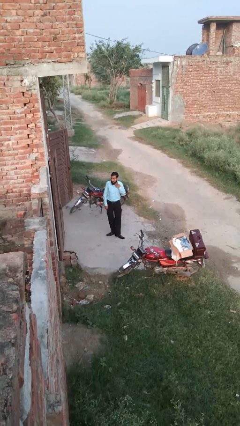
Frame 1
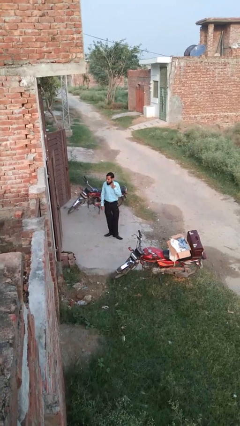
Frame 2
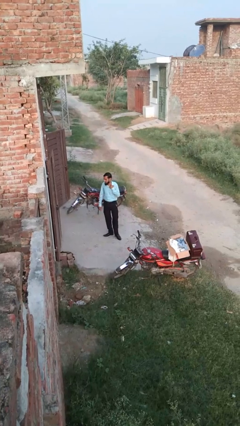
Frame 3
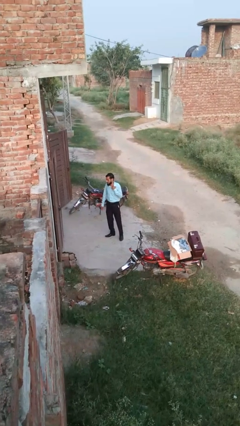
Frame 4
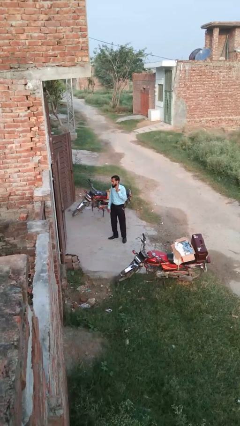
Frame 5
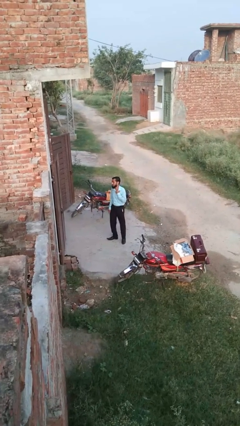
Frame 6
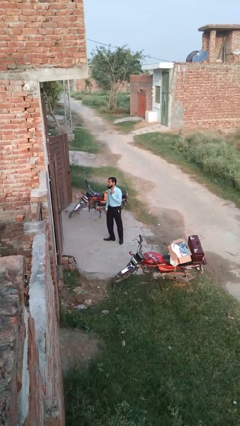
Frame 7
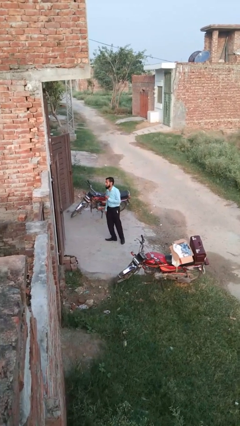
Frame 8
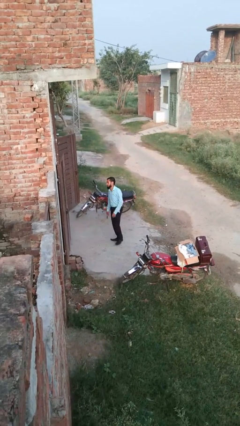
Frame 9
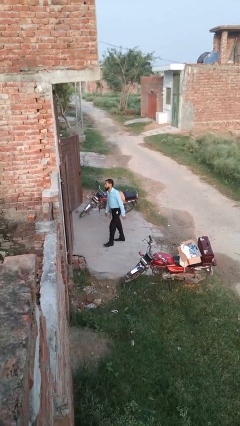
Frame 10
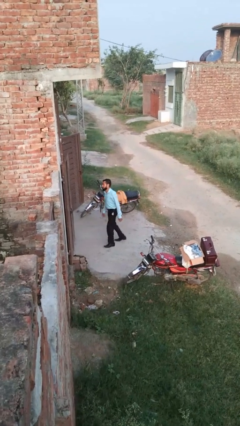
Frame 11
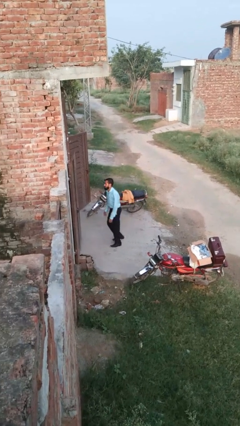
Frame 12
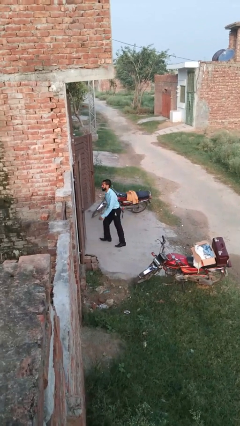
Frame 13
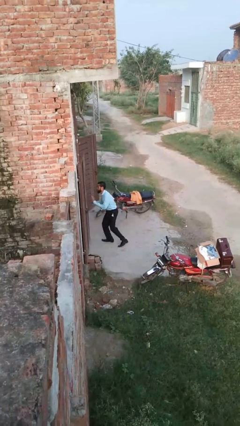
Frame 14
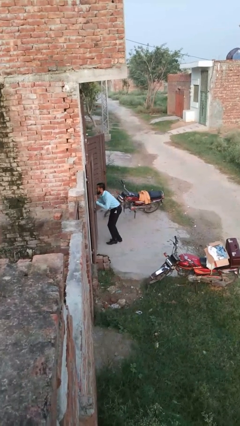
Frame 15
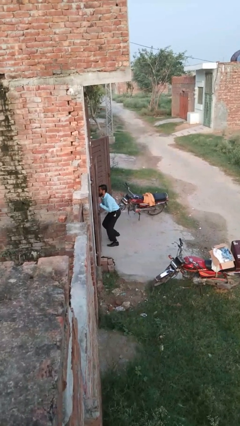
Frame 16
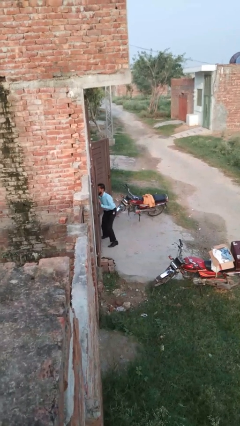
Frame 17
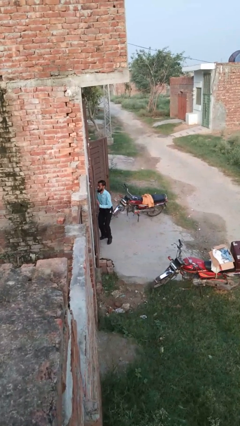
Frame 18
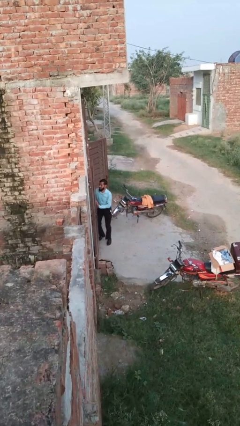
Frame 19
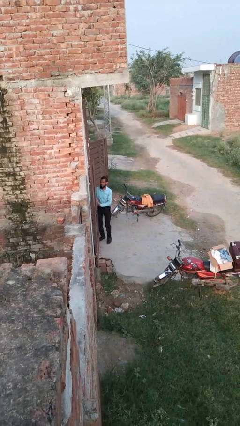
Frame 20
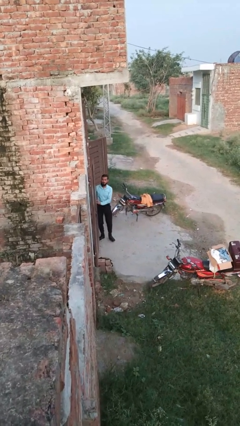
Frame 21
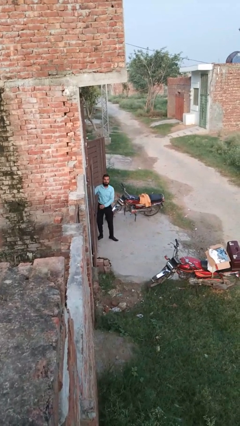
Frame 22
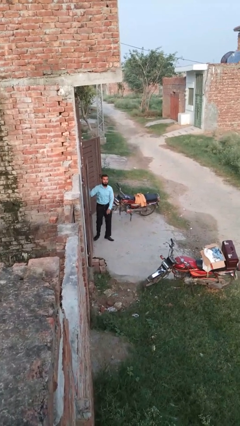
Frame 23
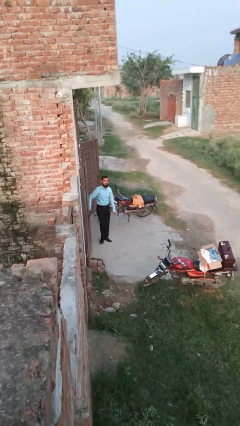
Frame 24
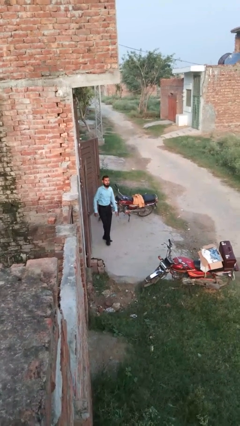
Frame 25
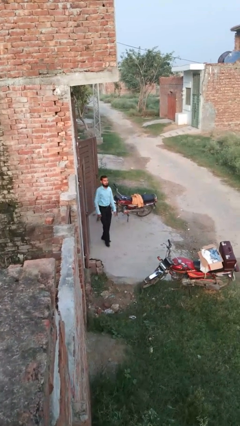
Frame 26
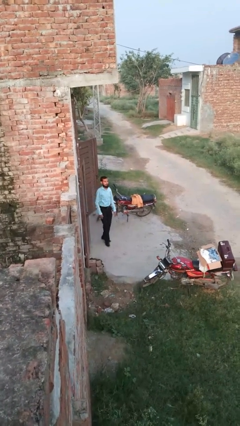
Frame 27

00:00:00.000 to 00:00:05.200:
person bumps into wall

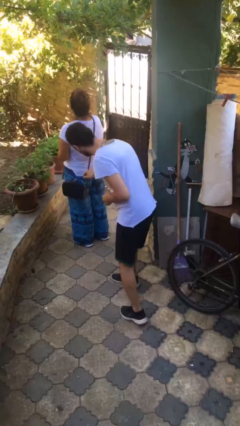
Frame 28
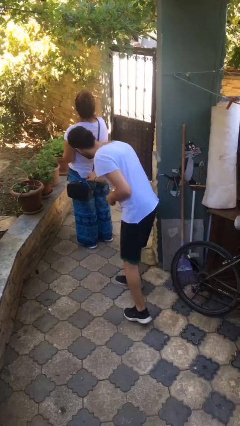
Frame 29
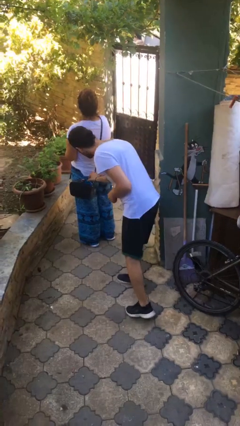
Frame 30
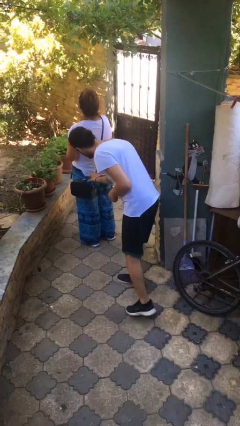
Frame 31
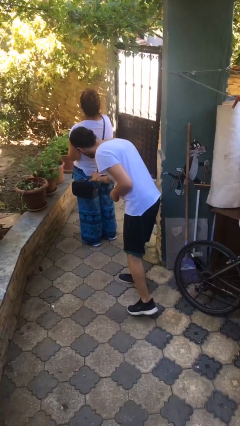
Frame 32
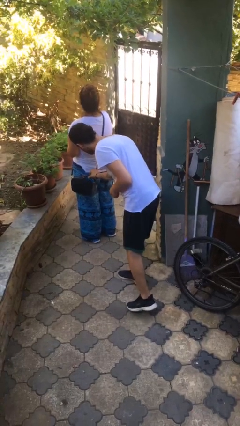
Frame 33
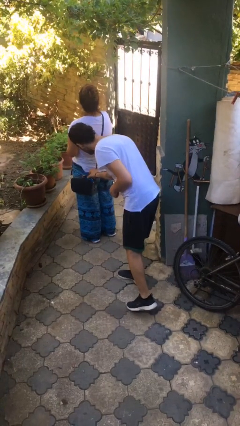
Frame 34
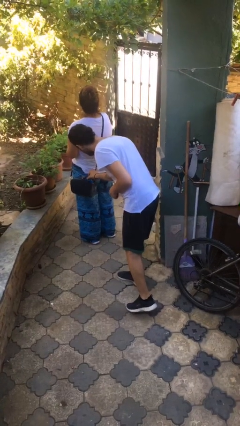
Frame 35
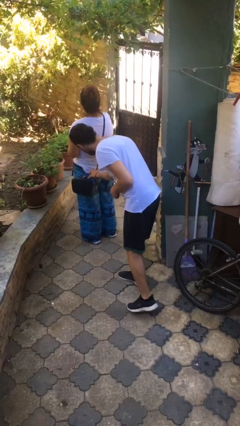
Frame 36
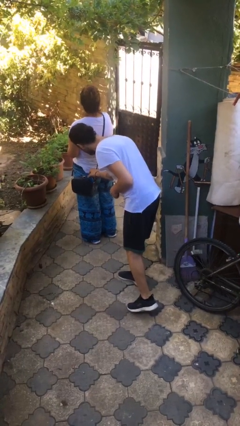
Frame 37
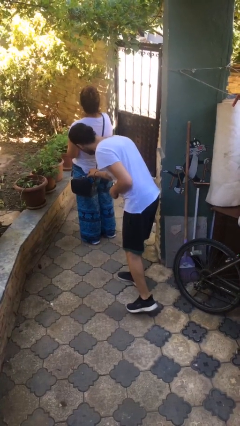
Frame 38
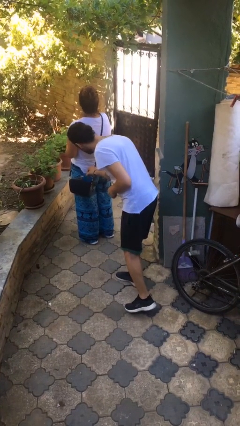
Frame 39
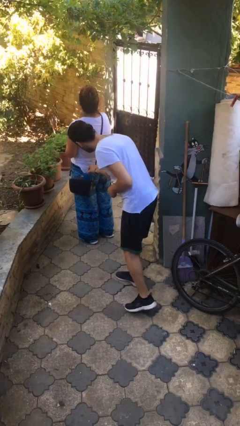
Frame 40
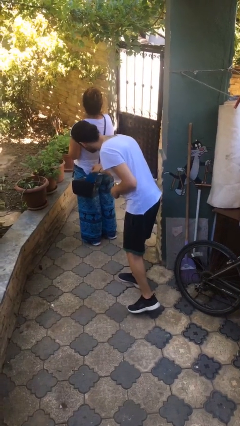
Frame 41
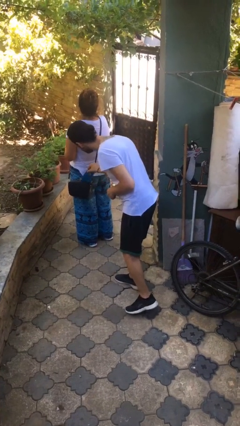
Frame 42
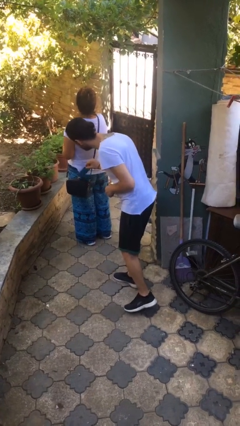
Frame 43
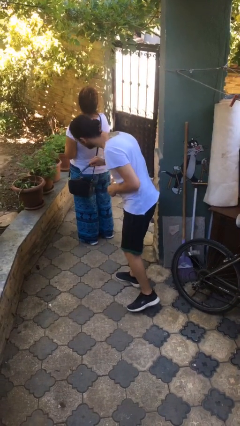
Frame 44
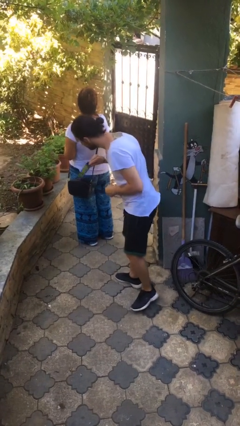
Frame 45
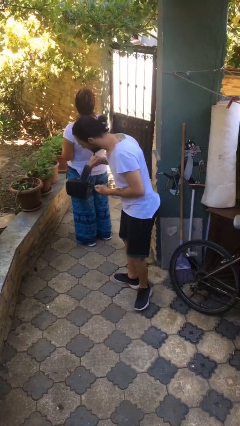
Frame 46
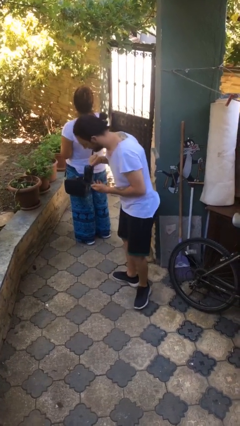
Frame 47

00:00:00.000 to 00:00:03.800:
person steals object from person

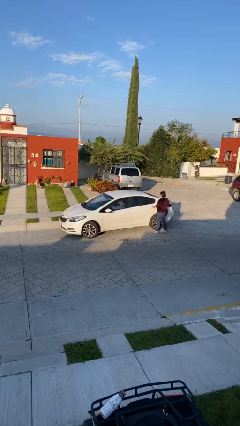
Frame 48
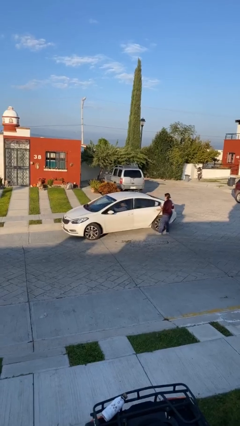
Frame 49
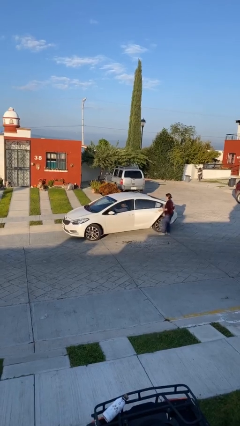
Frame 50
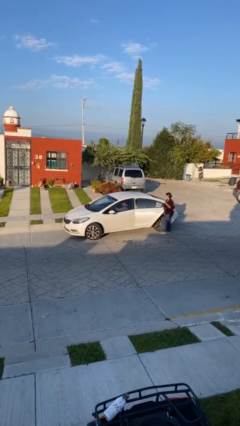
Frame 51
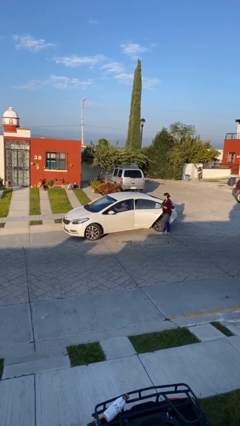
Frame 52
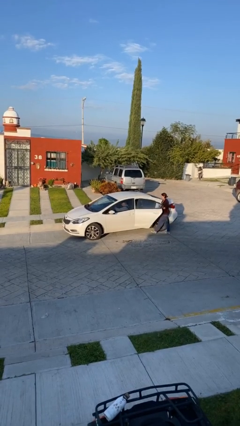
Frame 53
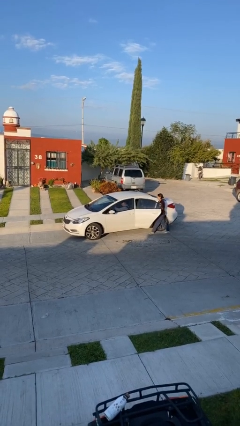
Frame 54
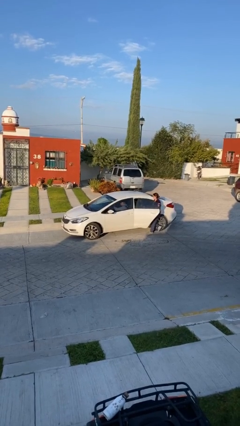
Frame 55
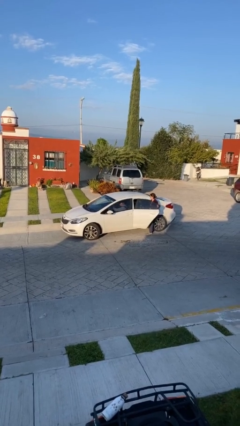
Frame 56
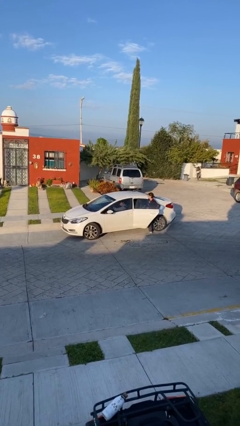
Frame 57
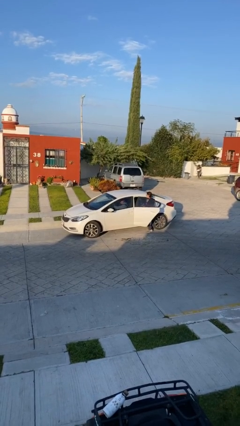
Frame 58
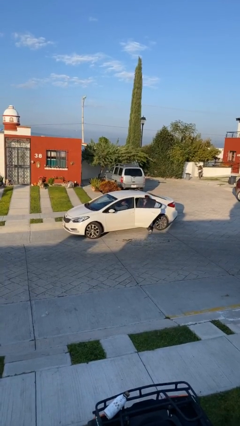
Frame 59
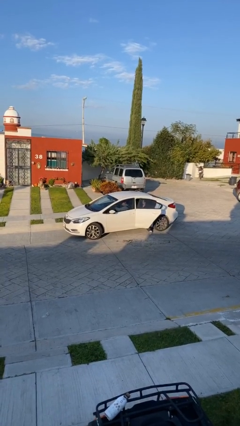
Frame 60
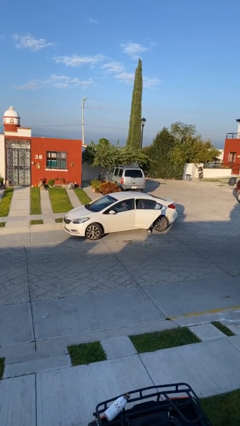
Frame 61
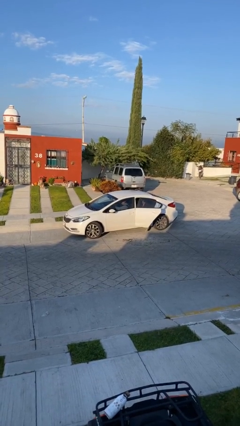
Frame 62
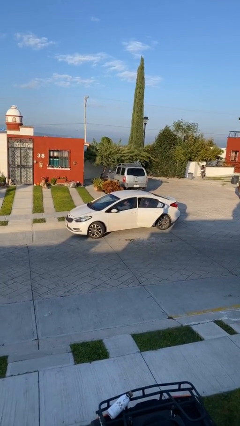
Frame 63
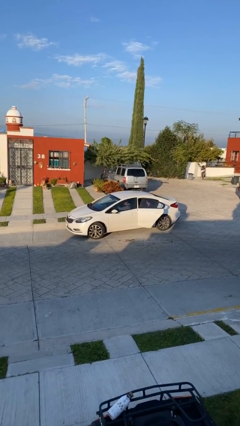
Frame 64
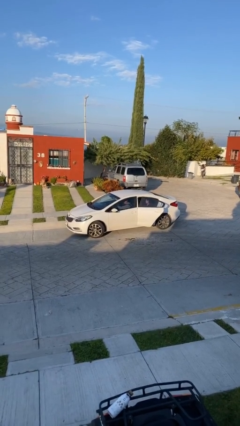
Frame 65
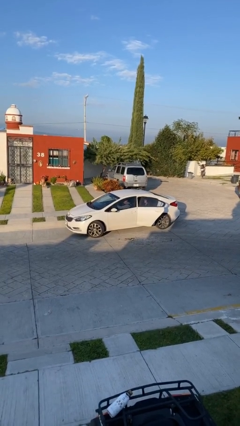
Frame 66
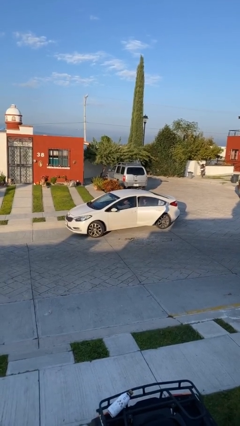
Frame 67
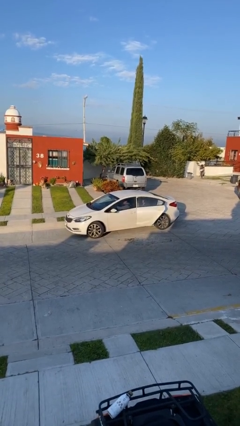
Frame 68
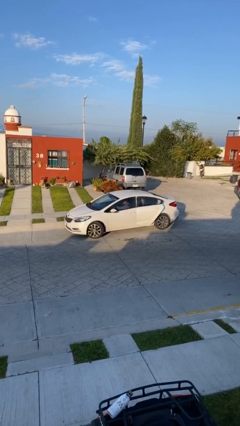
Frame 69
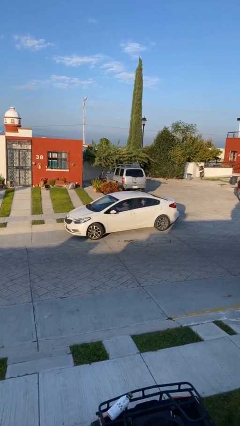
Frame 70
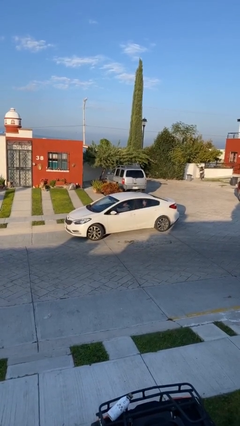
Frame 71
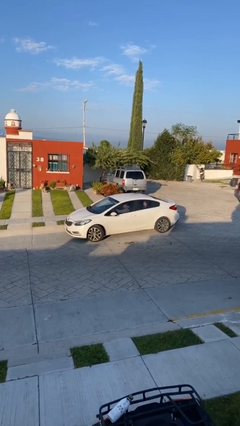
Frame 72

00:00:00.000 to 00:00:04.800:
car picks up person

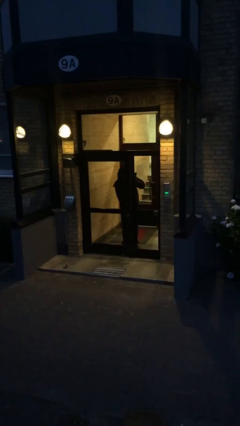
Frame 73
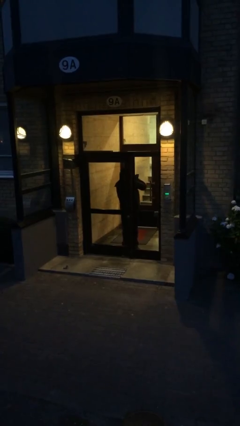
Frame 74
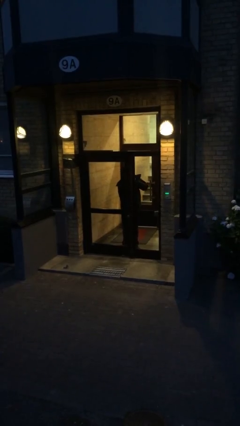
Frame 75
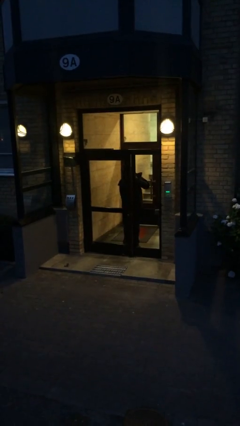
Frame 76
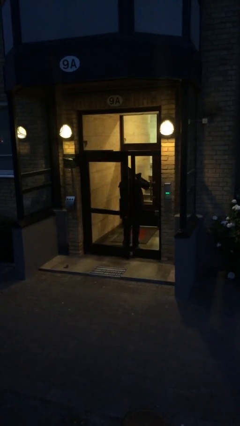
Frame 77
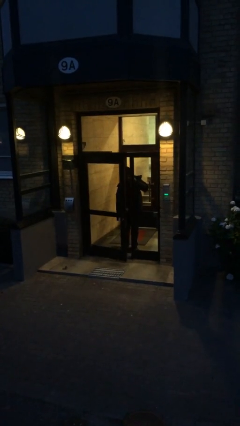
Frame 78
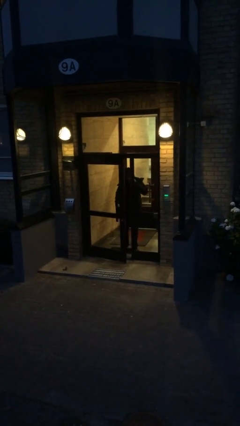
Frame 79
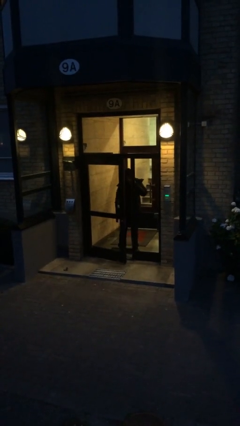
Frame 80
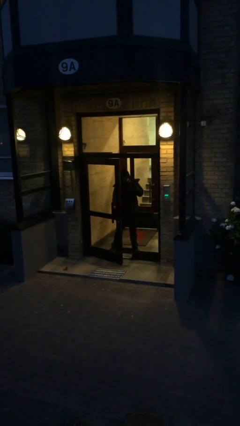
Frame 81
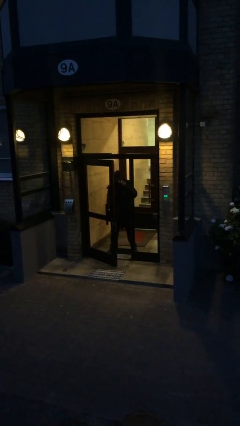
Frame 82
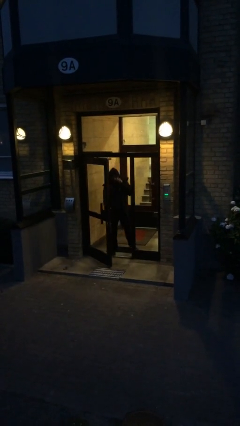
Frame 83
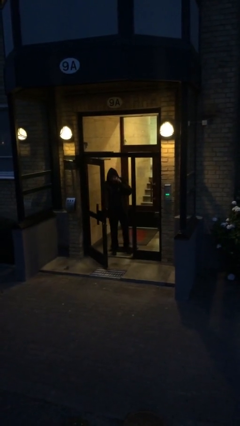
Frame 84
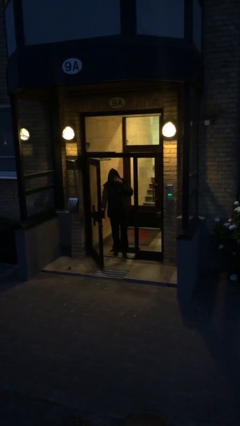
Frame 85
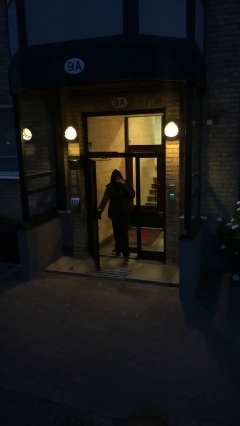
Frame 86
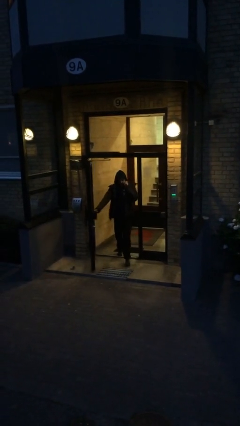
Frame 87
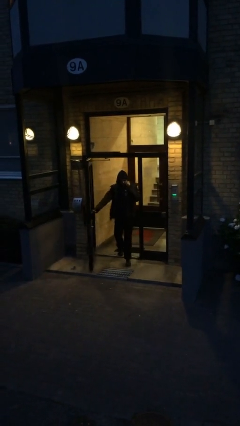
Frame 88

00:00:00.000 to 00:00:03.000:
person opens facility door

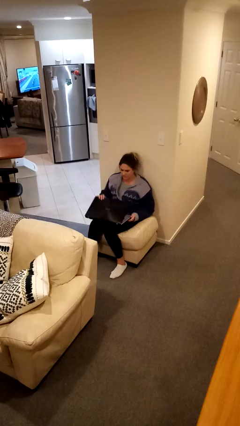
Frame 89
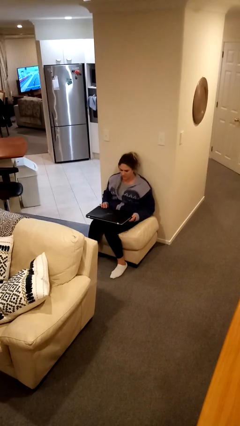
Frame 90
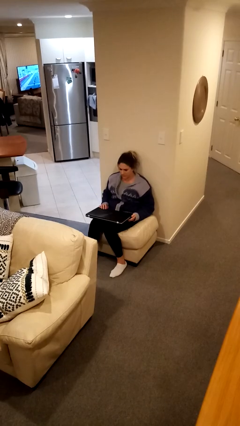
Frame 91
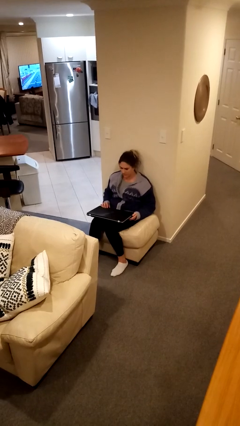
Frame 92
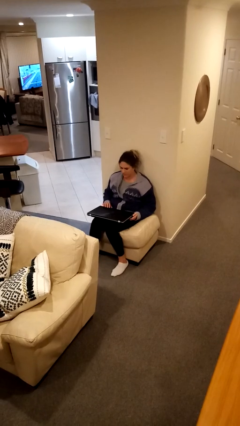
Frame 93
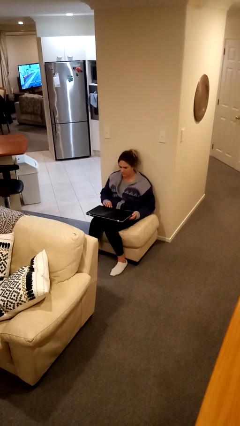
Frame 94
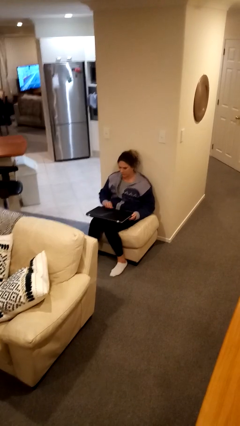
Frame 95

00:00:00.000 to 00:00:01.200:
person closes laptop
